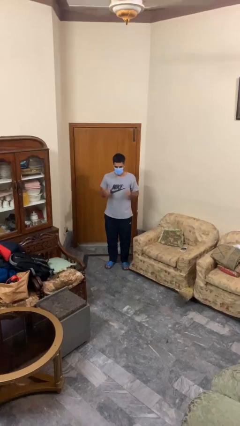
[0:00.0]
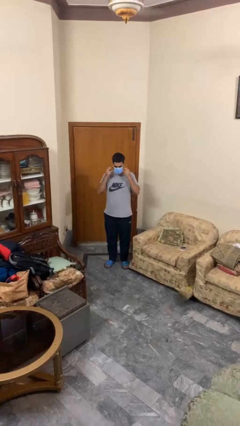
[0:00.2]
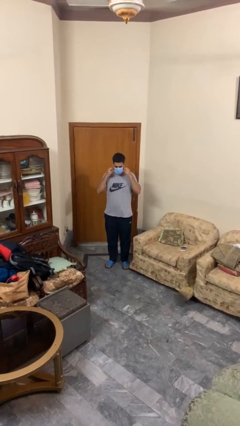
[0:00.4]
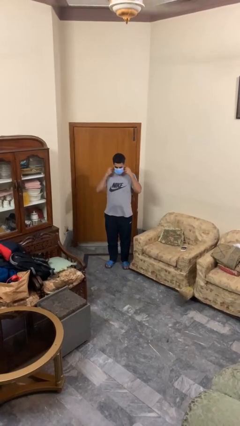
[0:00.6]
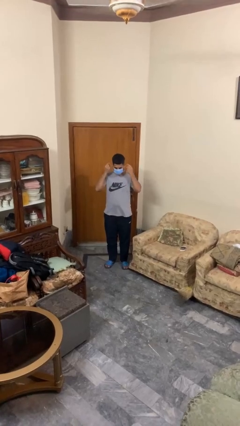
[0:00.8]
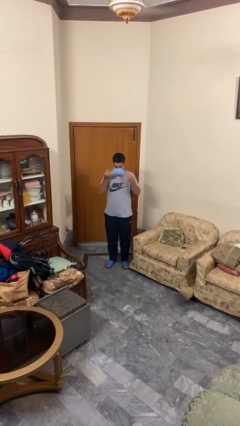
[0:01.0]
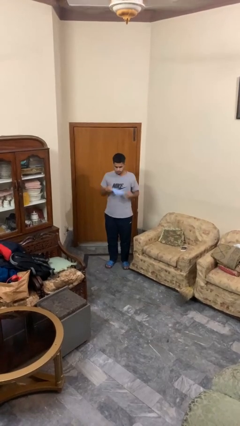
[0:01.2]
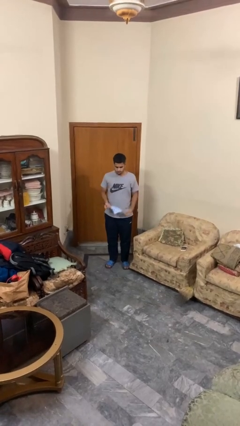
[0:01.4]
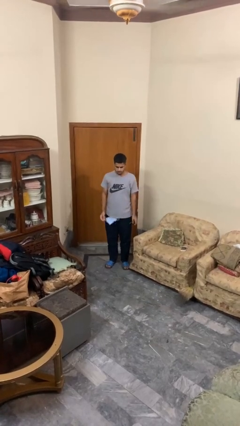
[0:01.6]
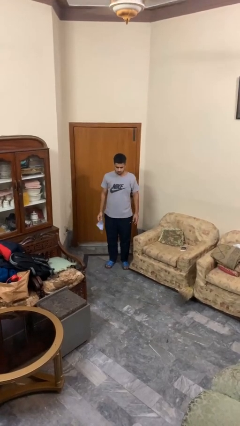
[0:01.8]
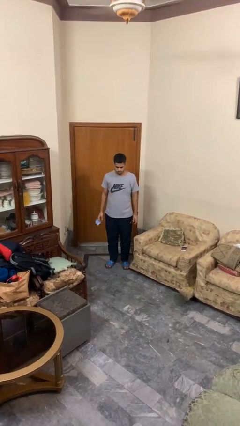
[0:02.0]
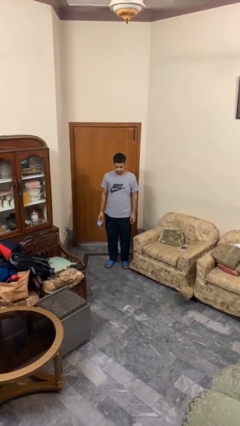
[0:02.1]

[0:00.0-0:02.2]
person takes off facemask

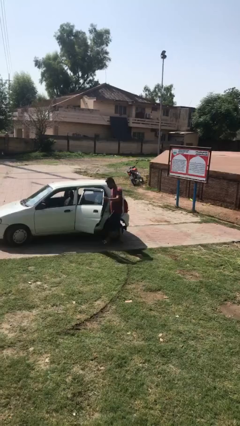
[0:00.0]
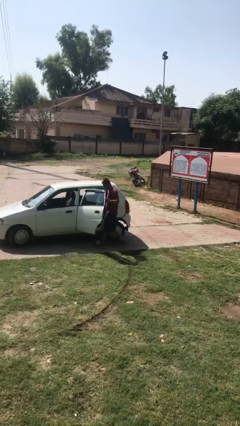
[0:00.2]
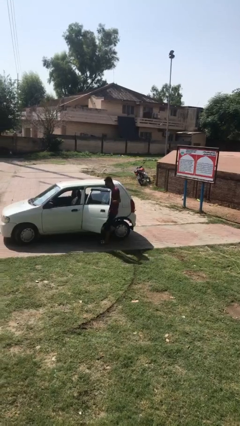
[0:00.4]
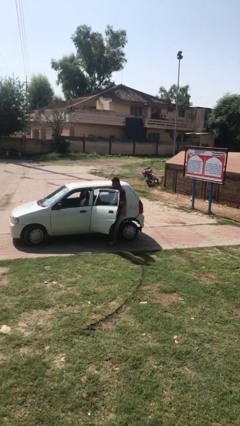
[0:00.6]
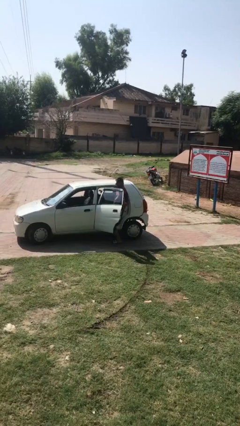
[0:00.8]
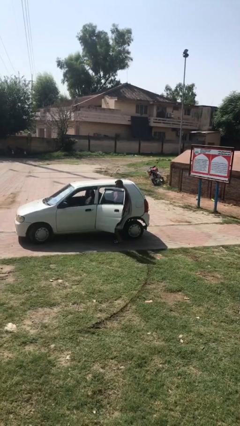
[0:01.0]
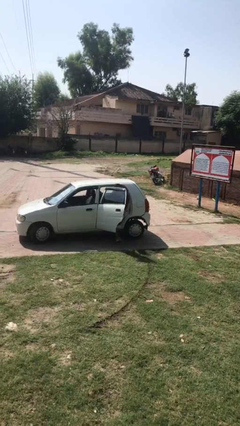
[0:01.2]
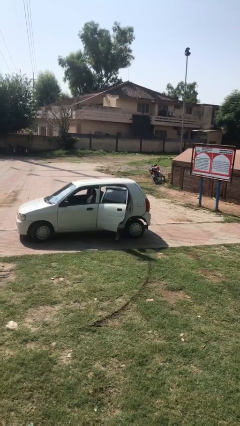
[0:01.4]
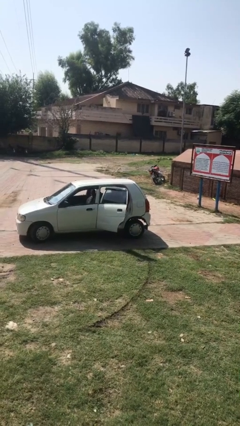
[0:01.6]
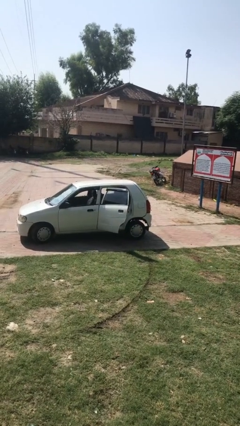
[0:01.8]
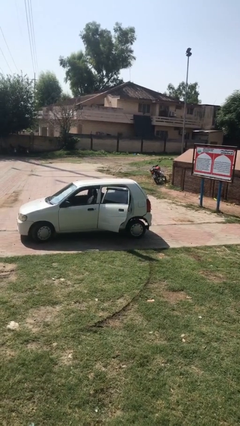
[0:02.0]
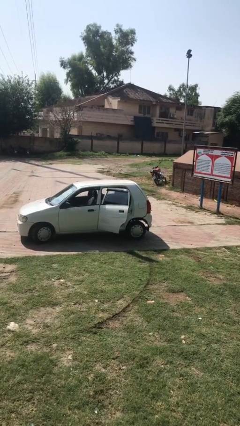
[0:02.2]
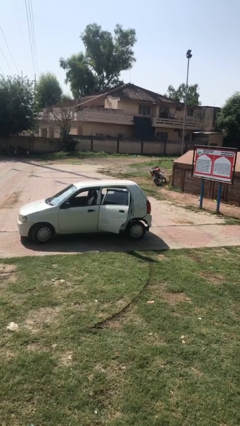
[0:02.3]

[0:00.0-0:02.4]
person enters car

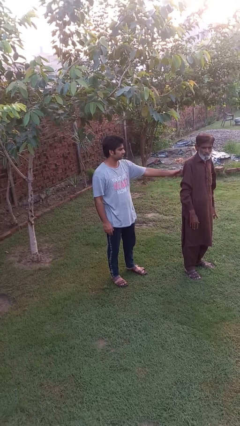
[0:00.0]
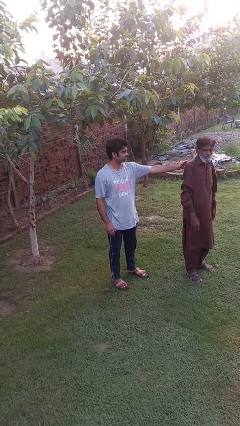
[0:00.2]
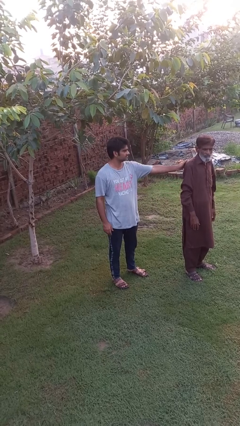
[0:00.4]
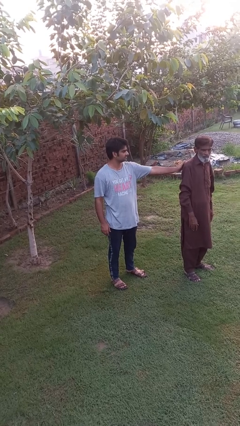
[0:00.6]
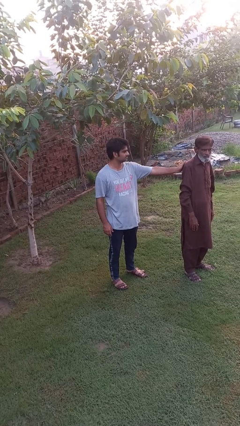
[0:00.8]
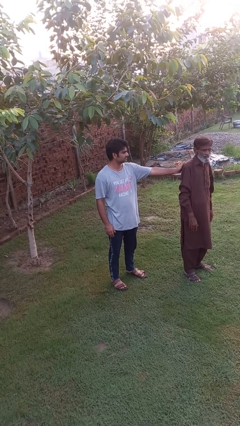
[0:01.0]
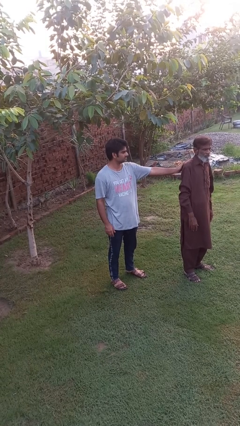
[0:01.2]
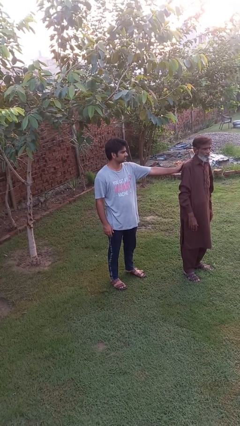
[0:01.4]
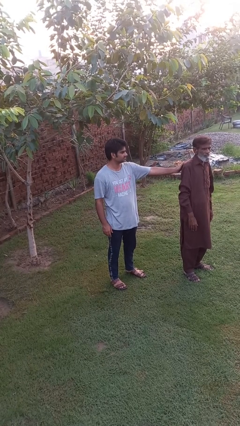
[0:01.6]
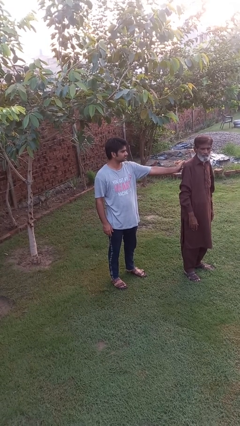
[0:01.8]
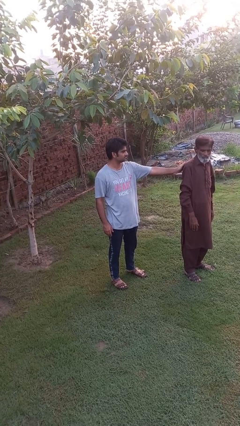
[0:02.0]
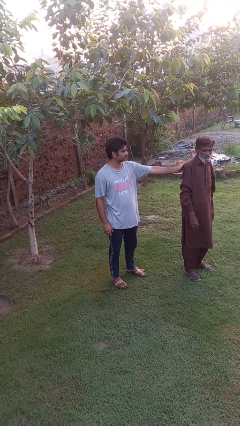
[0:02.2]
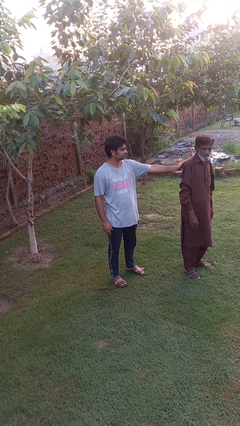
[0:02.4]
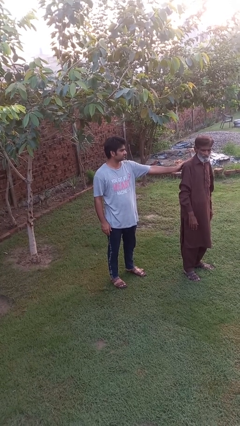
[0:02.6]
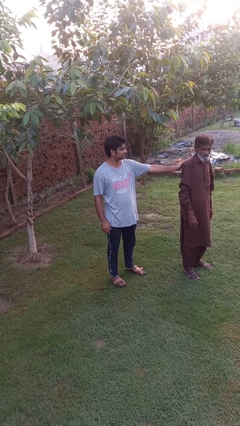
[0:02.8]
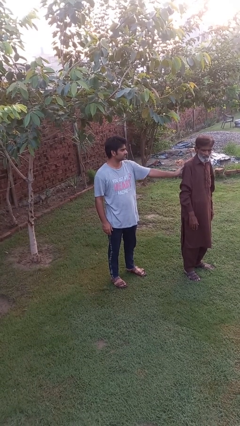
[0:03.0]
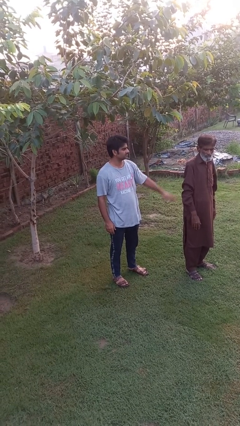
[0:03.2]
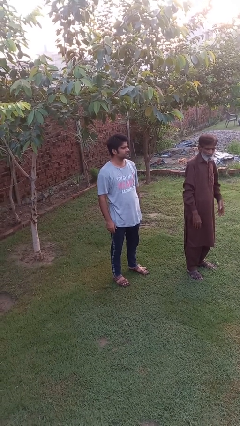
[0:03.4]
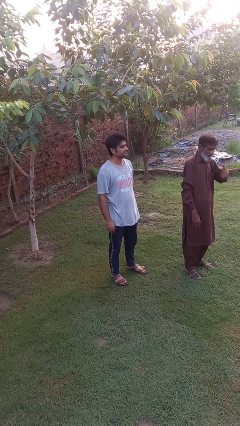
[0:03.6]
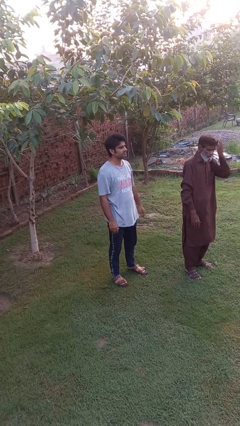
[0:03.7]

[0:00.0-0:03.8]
person touches back of person

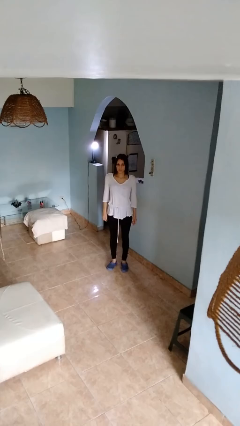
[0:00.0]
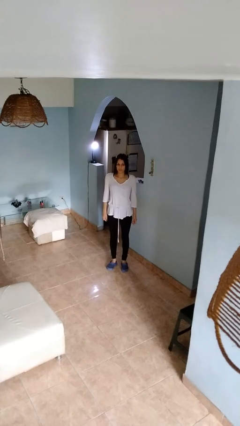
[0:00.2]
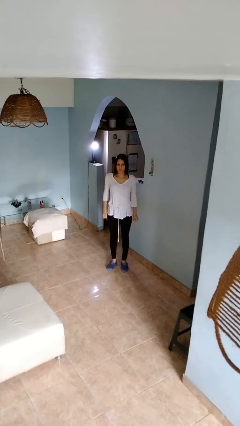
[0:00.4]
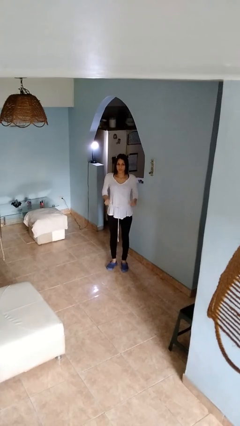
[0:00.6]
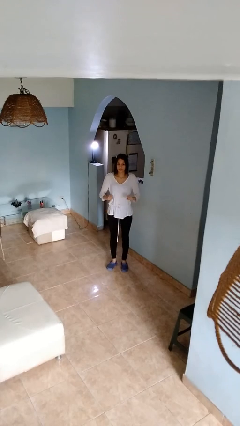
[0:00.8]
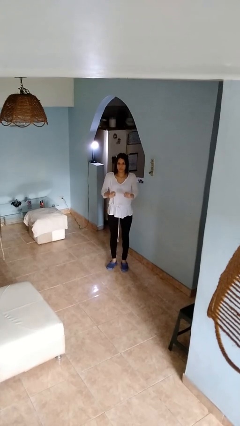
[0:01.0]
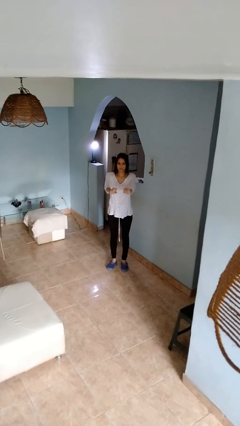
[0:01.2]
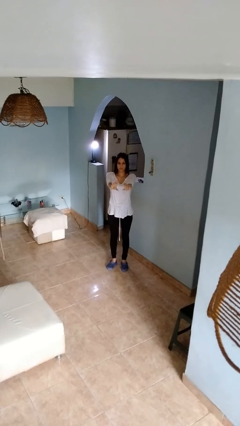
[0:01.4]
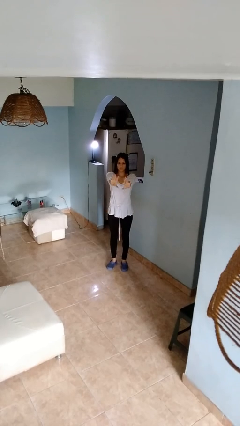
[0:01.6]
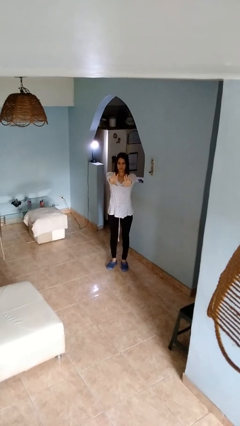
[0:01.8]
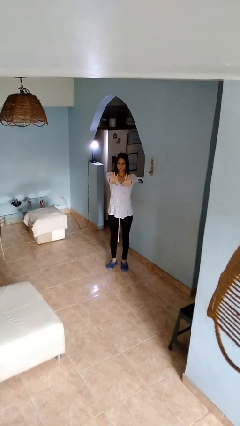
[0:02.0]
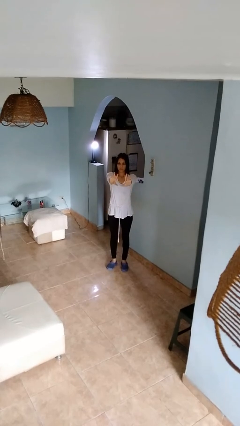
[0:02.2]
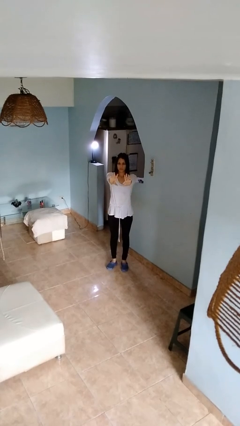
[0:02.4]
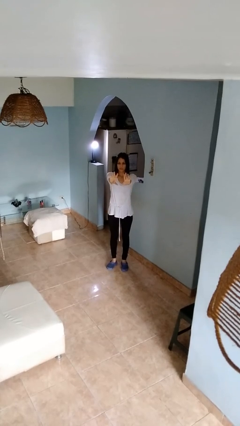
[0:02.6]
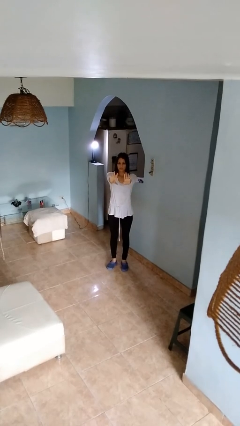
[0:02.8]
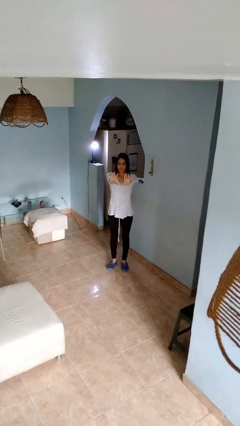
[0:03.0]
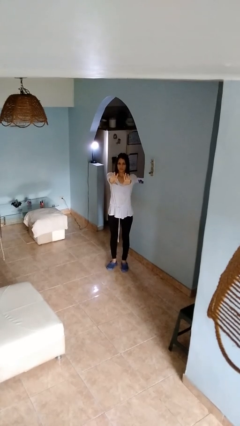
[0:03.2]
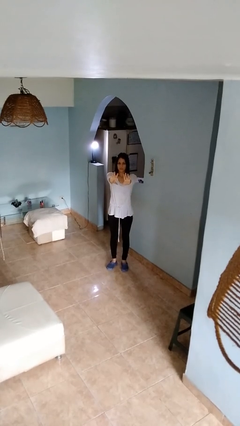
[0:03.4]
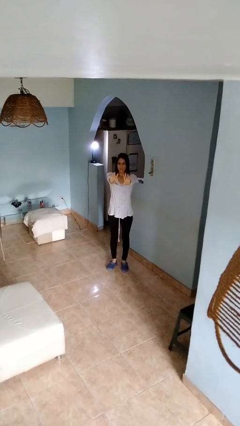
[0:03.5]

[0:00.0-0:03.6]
person gestures zoom in

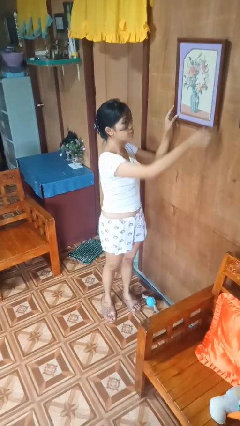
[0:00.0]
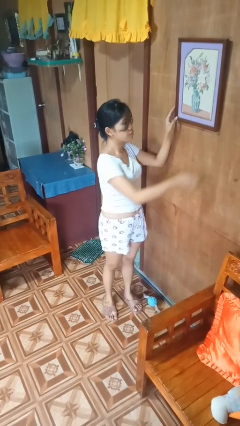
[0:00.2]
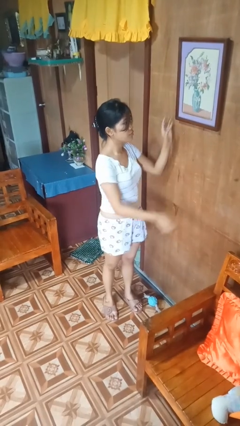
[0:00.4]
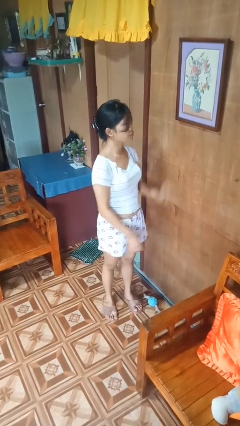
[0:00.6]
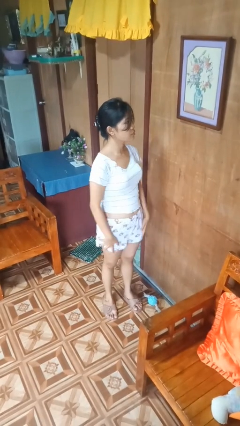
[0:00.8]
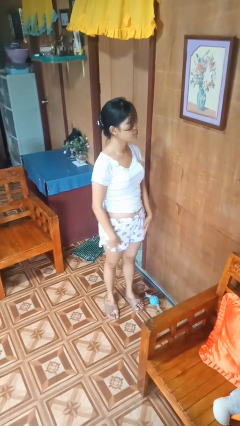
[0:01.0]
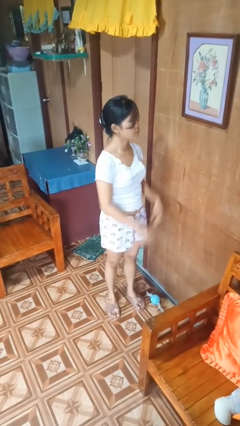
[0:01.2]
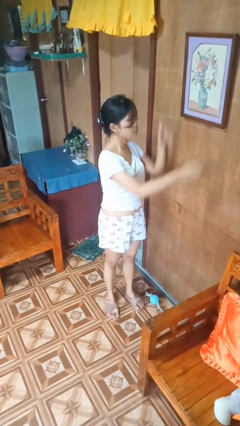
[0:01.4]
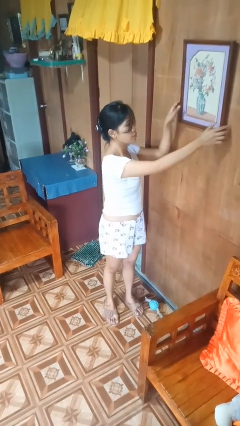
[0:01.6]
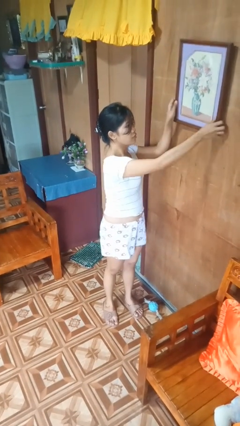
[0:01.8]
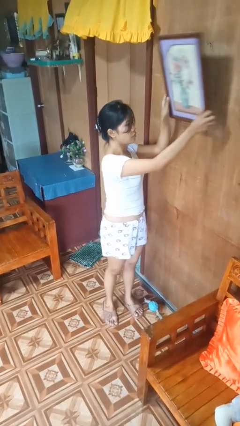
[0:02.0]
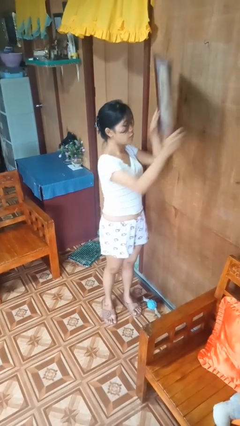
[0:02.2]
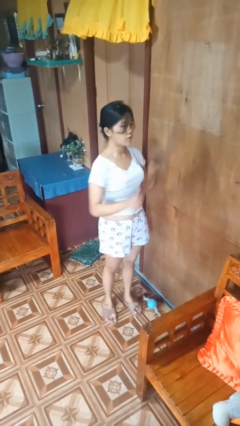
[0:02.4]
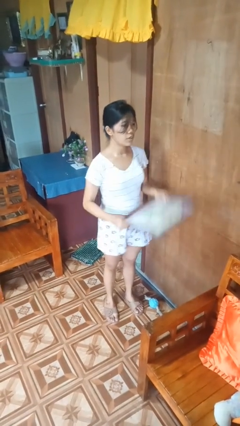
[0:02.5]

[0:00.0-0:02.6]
person takes down picture frame

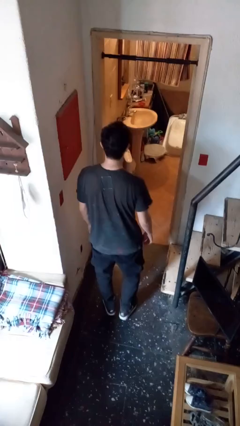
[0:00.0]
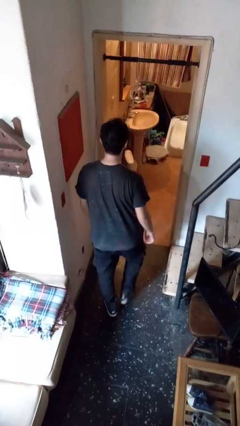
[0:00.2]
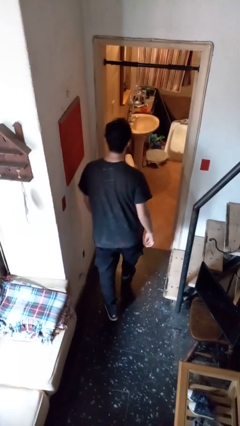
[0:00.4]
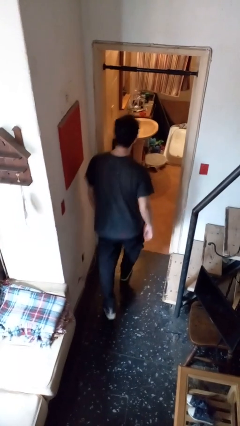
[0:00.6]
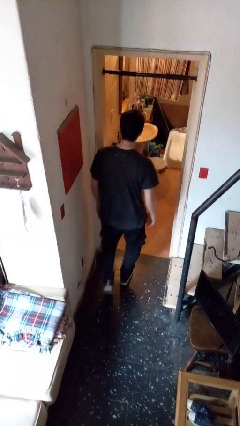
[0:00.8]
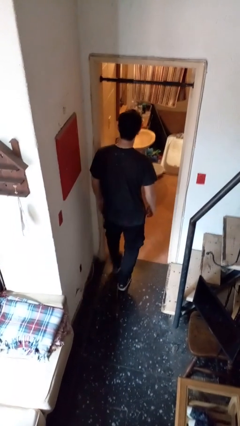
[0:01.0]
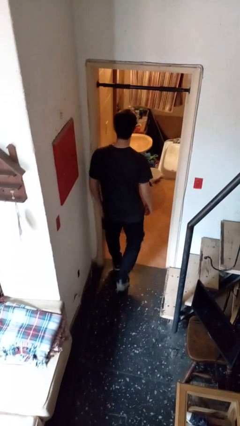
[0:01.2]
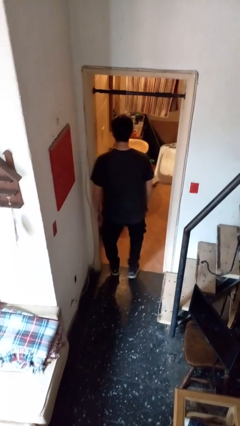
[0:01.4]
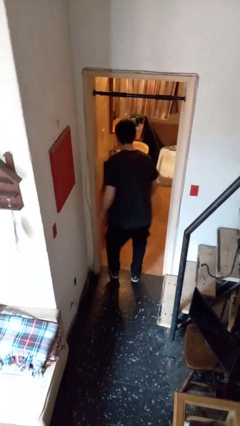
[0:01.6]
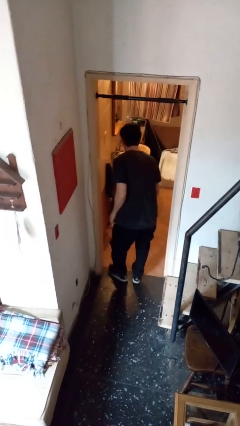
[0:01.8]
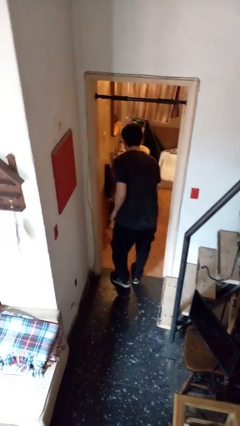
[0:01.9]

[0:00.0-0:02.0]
person bumps into wall

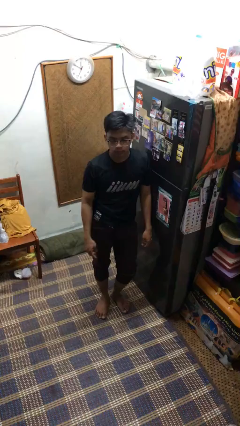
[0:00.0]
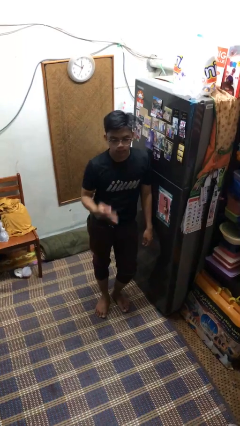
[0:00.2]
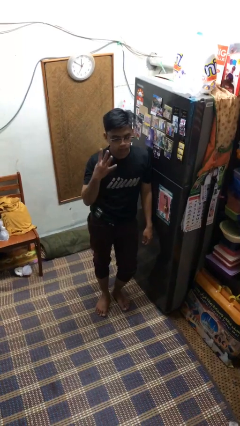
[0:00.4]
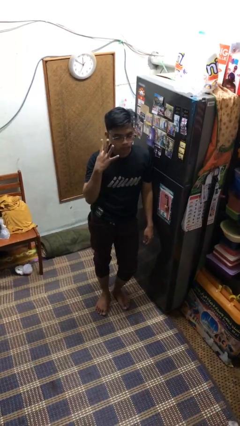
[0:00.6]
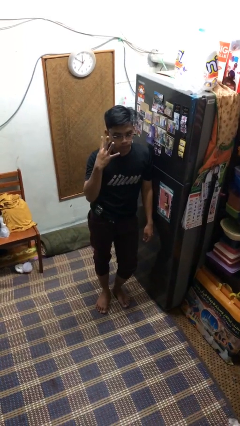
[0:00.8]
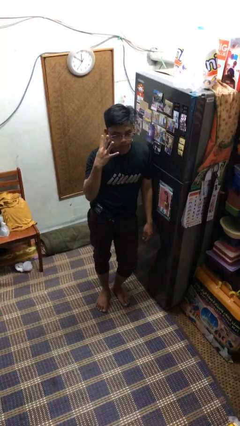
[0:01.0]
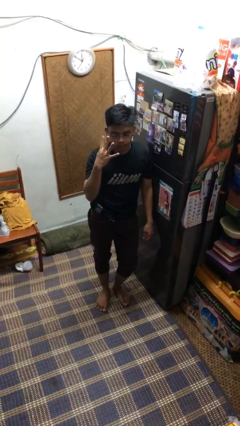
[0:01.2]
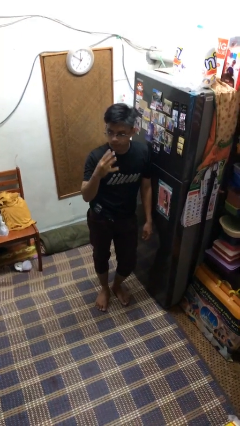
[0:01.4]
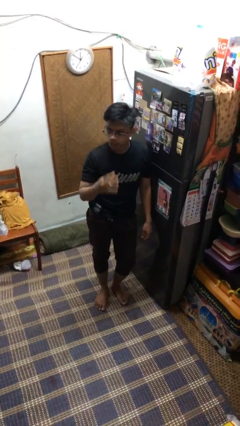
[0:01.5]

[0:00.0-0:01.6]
person gestures number four
